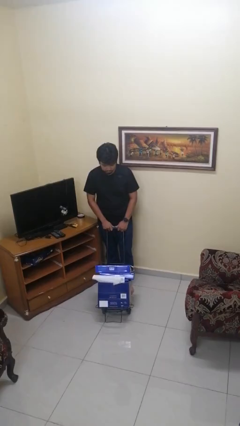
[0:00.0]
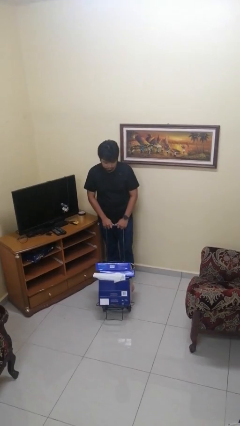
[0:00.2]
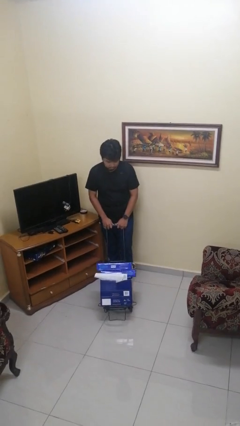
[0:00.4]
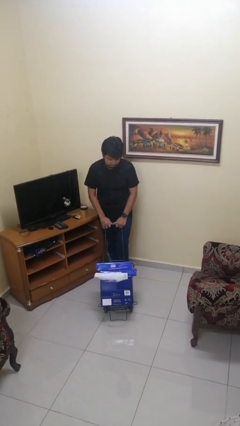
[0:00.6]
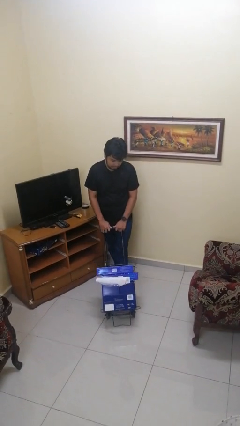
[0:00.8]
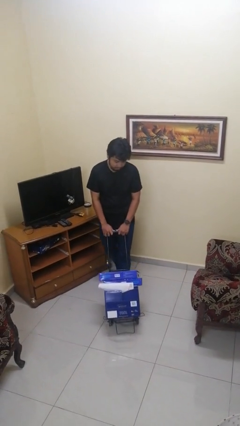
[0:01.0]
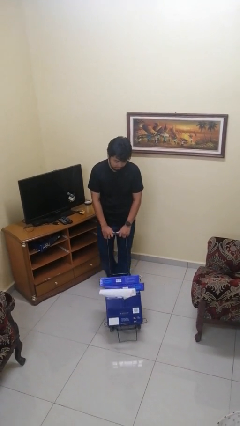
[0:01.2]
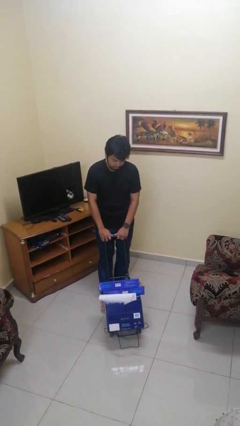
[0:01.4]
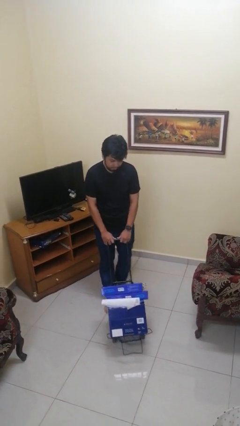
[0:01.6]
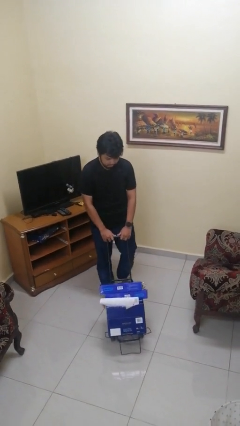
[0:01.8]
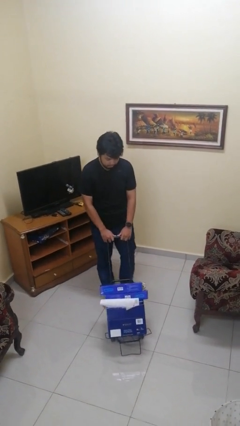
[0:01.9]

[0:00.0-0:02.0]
person pushes wheeled cart

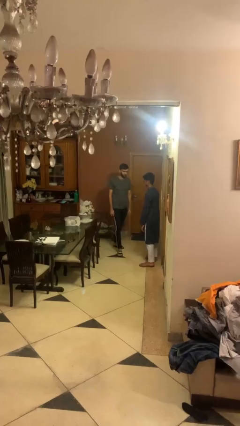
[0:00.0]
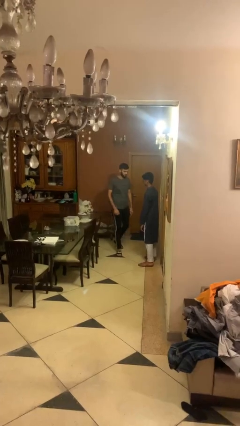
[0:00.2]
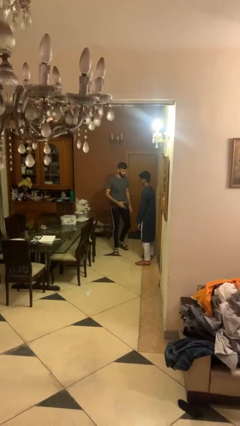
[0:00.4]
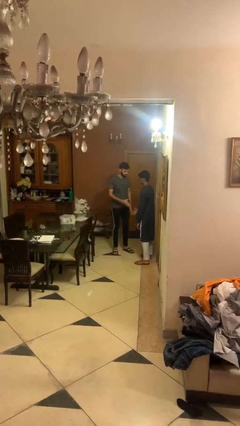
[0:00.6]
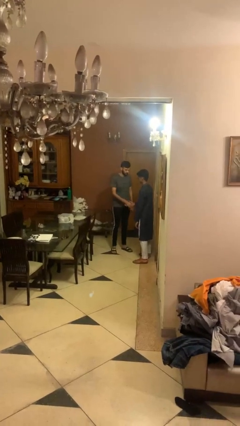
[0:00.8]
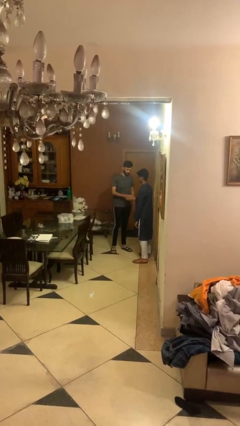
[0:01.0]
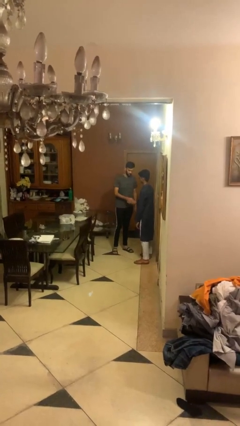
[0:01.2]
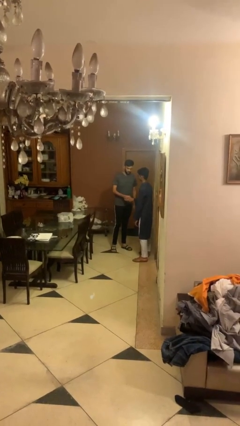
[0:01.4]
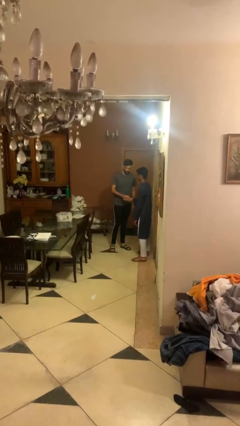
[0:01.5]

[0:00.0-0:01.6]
person shakes hand

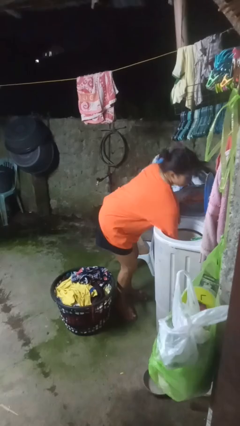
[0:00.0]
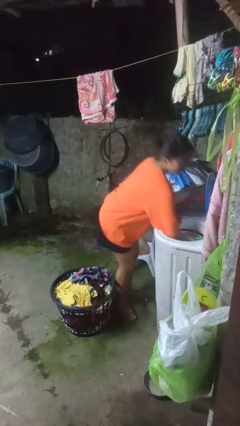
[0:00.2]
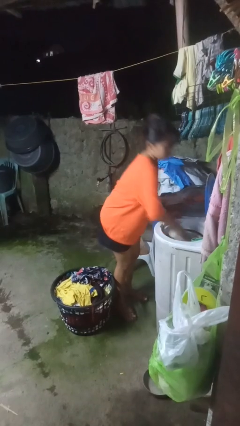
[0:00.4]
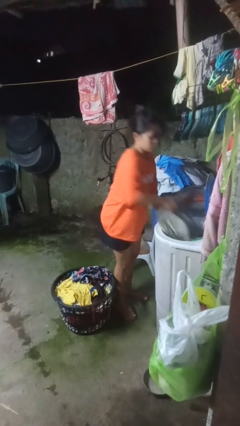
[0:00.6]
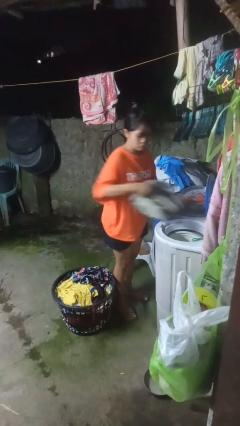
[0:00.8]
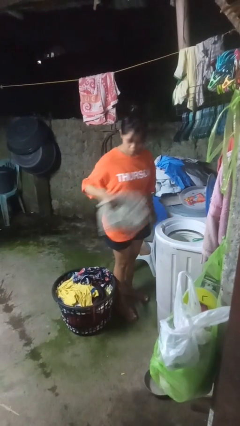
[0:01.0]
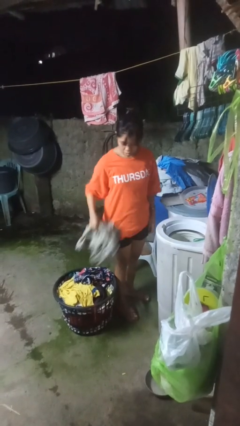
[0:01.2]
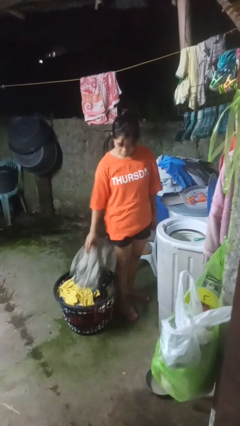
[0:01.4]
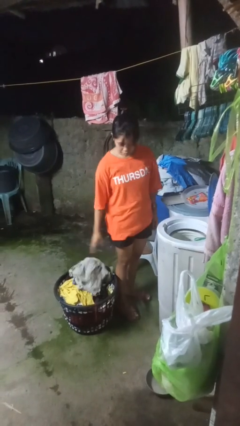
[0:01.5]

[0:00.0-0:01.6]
person unloads dryer

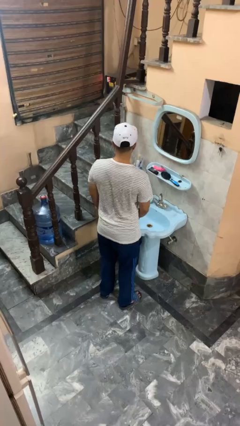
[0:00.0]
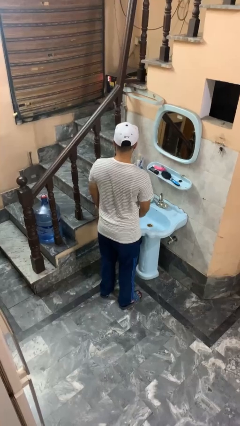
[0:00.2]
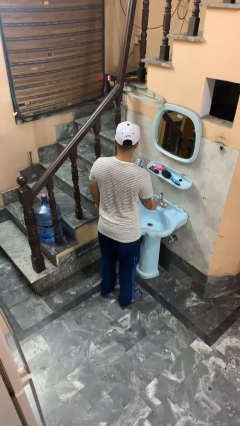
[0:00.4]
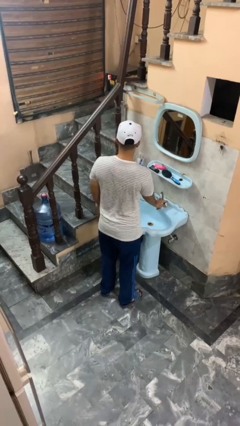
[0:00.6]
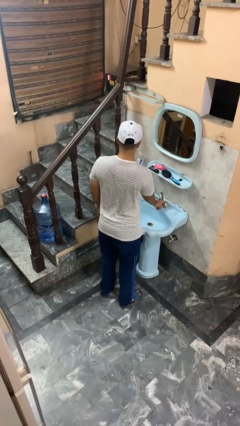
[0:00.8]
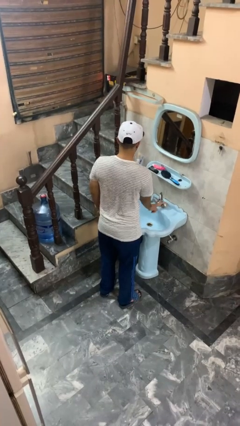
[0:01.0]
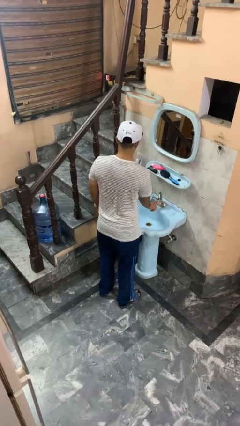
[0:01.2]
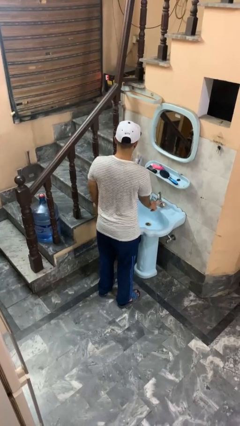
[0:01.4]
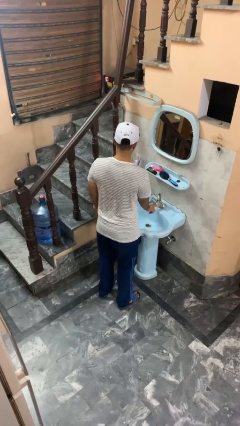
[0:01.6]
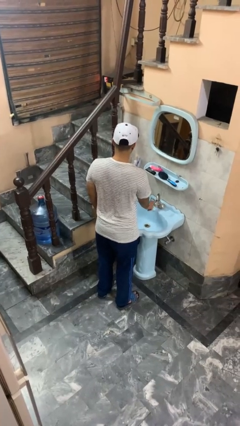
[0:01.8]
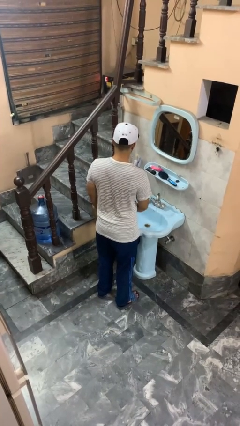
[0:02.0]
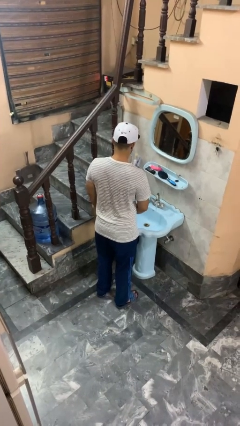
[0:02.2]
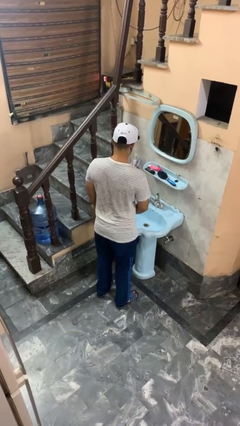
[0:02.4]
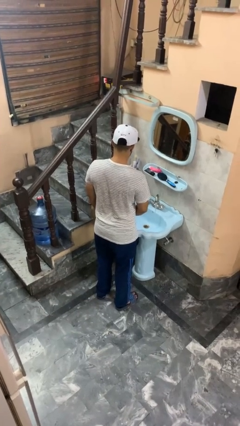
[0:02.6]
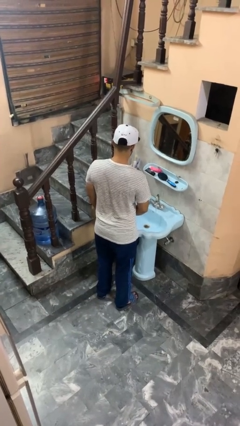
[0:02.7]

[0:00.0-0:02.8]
person turns on faucet

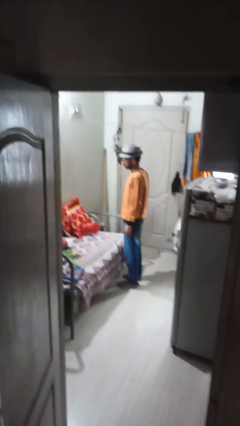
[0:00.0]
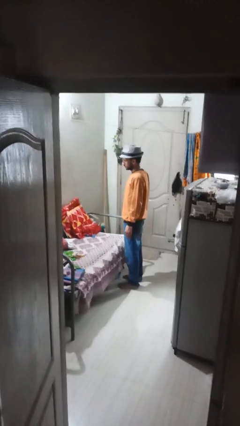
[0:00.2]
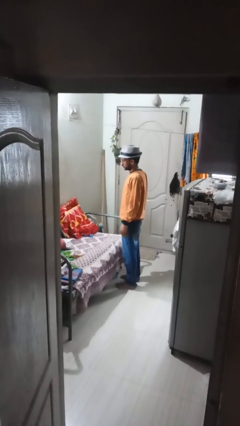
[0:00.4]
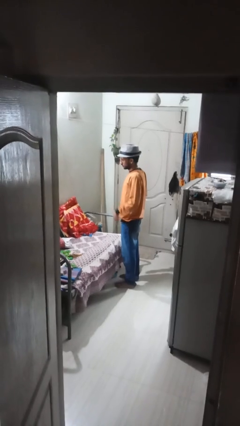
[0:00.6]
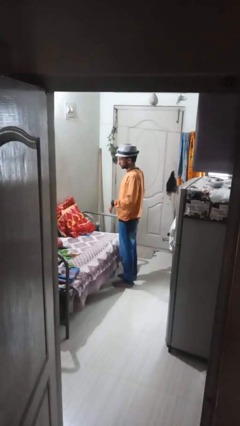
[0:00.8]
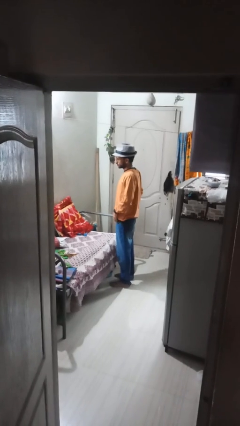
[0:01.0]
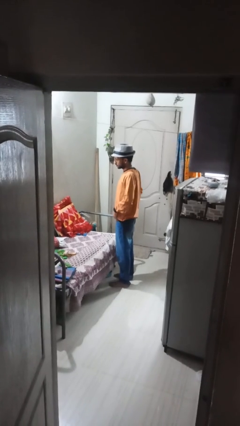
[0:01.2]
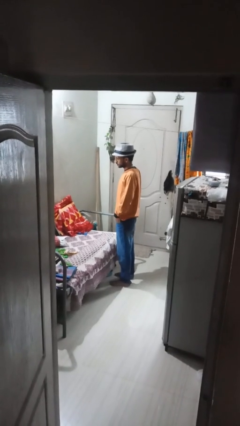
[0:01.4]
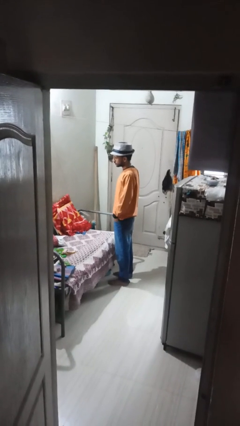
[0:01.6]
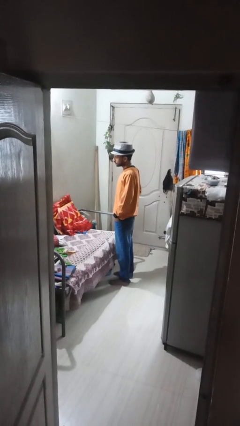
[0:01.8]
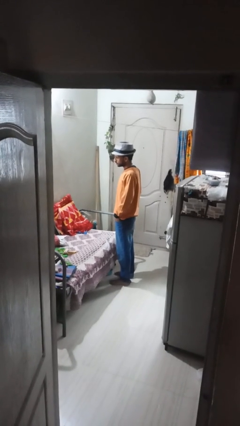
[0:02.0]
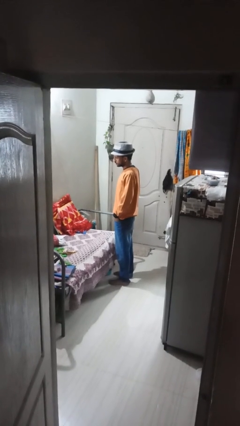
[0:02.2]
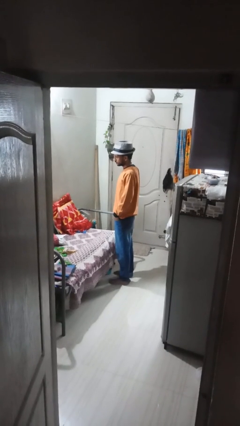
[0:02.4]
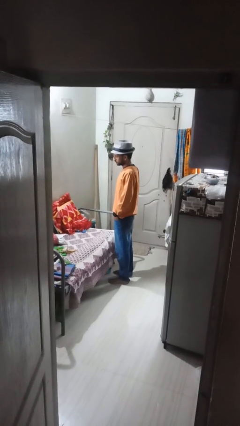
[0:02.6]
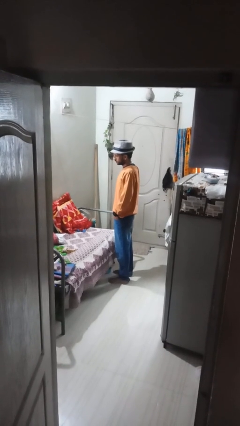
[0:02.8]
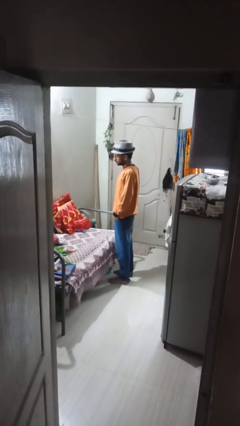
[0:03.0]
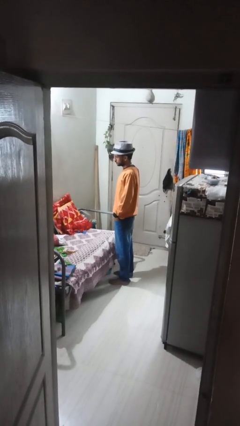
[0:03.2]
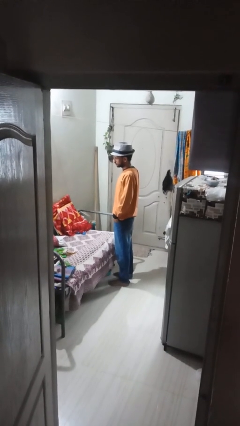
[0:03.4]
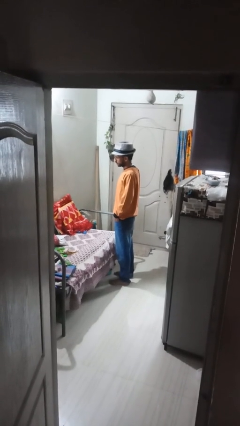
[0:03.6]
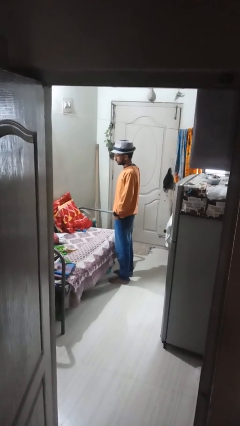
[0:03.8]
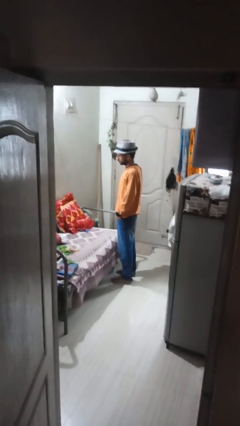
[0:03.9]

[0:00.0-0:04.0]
person puts hands in back pockets

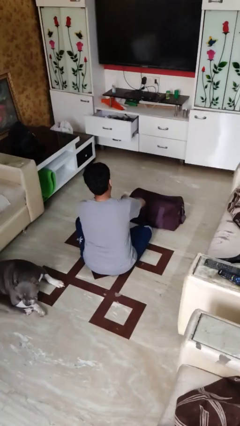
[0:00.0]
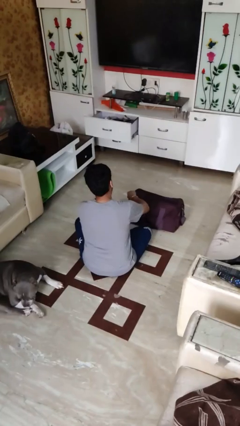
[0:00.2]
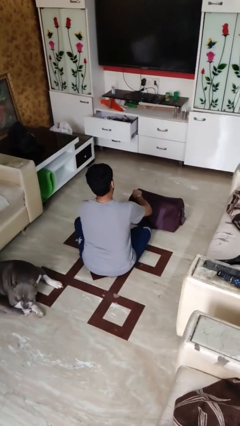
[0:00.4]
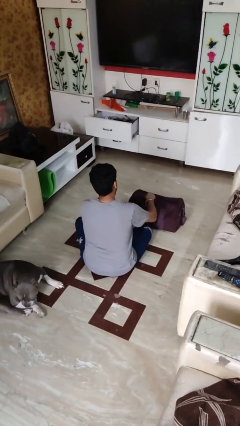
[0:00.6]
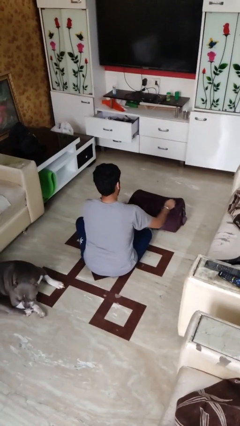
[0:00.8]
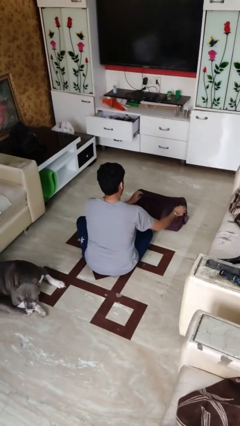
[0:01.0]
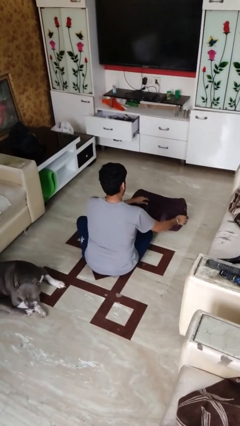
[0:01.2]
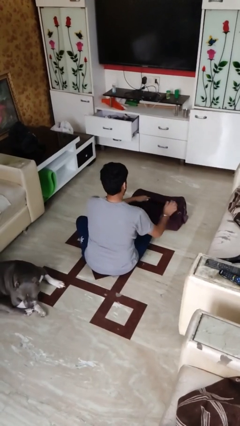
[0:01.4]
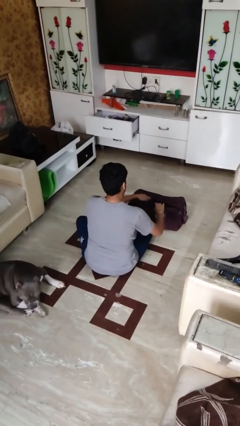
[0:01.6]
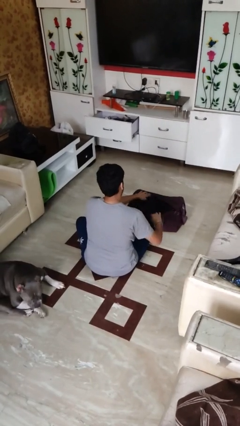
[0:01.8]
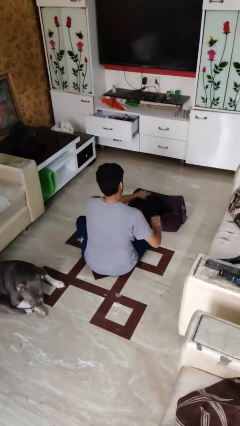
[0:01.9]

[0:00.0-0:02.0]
person opens suitcase

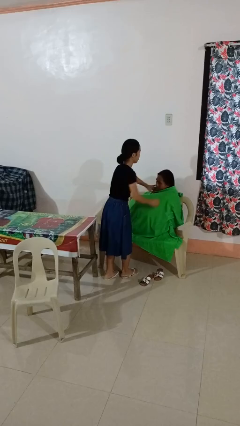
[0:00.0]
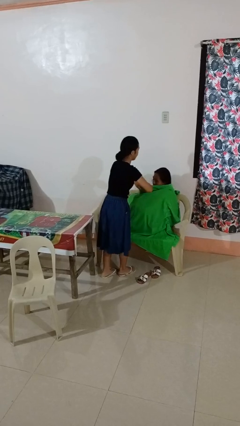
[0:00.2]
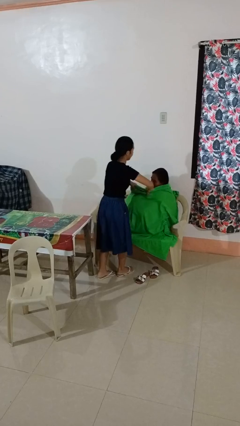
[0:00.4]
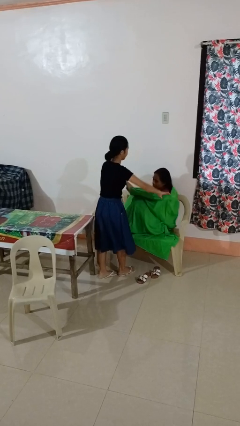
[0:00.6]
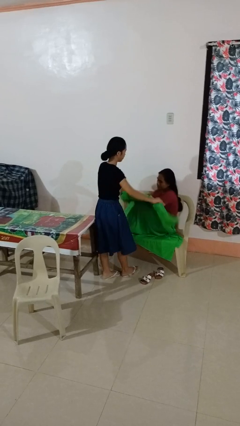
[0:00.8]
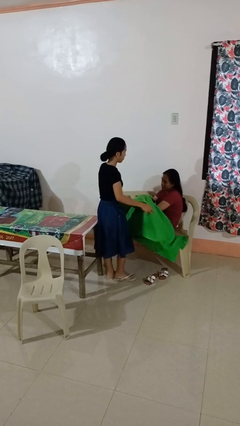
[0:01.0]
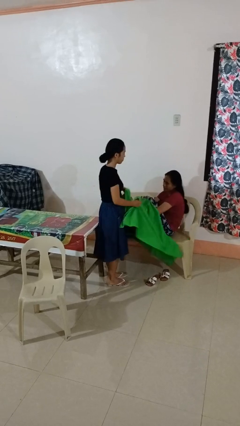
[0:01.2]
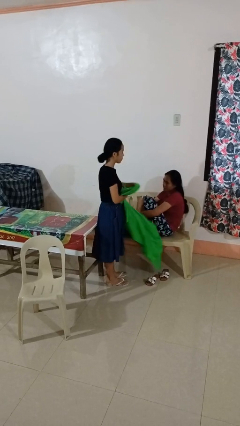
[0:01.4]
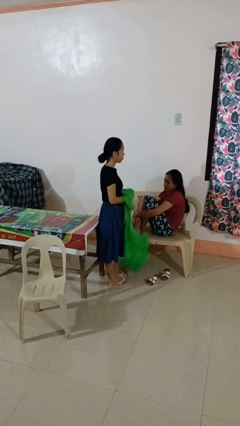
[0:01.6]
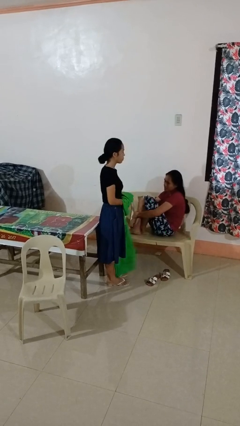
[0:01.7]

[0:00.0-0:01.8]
person uncovers friend with blanket

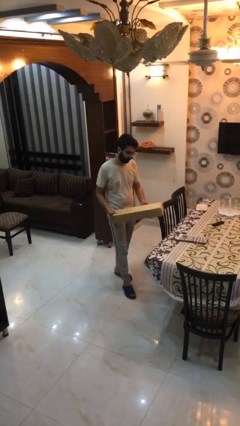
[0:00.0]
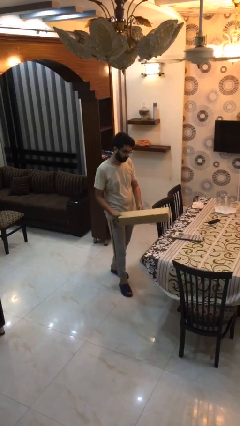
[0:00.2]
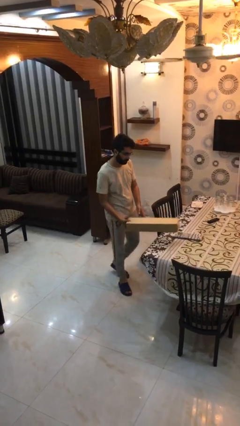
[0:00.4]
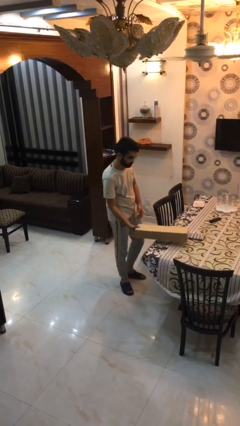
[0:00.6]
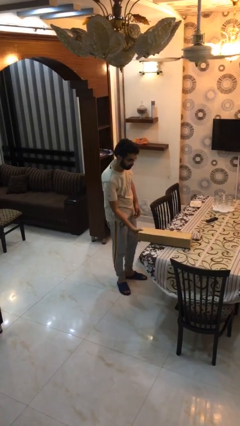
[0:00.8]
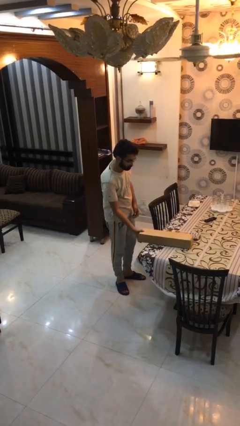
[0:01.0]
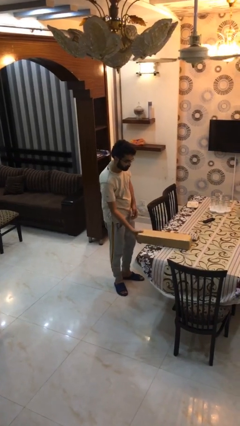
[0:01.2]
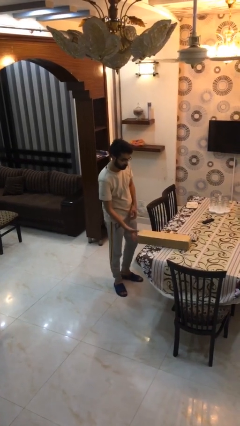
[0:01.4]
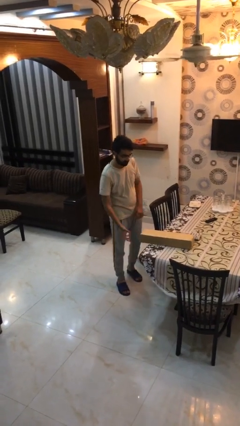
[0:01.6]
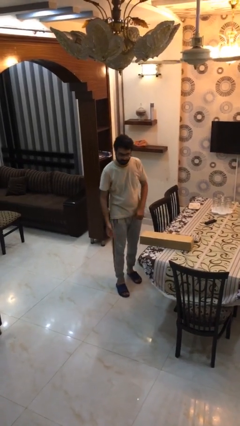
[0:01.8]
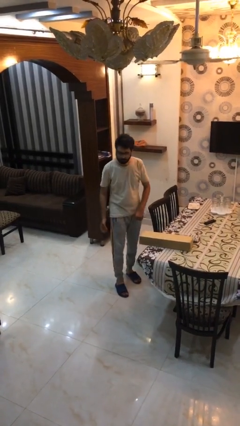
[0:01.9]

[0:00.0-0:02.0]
person puts down object on table
